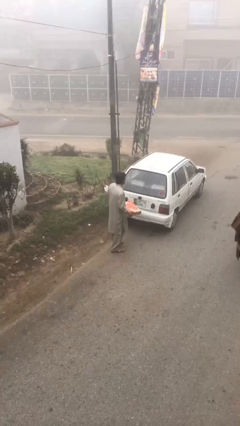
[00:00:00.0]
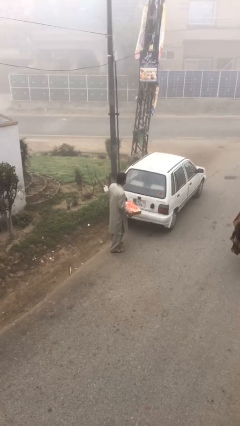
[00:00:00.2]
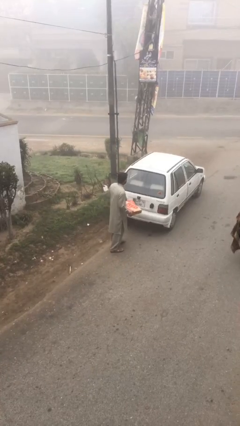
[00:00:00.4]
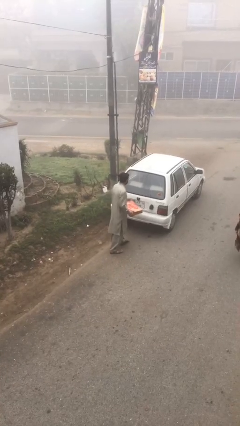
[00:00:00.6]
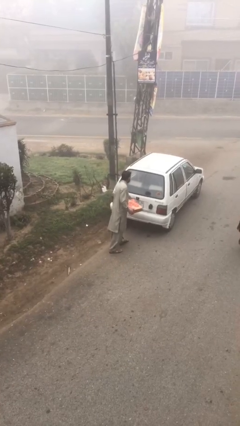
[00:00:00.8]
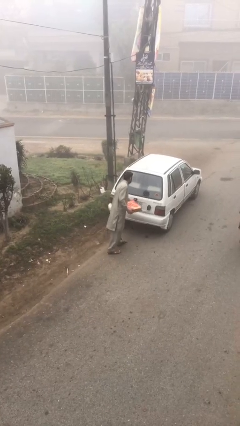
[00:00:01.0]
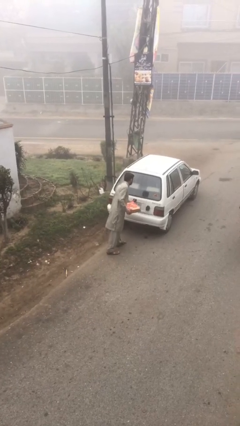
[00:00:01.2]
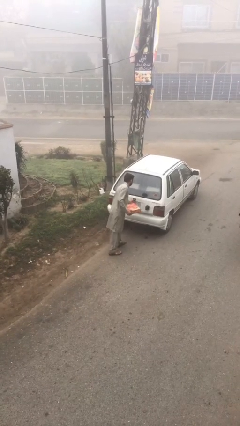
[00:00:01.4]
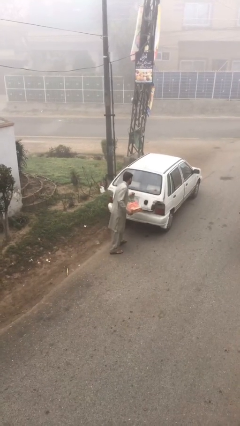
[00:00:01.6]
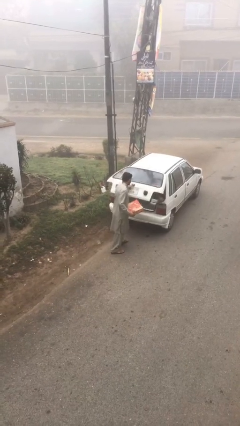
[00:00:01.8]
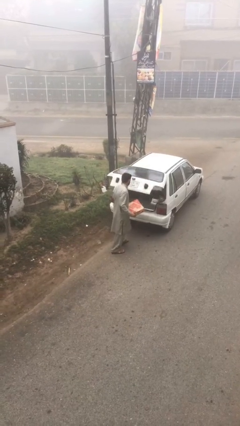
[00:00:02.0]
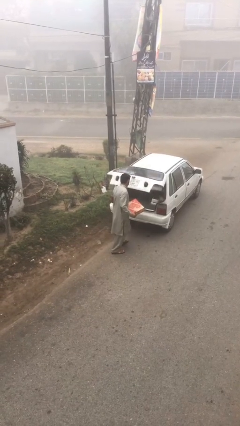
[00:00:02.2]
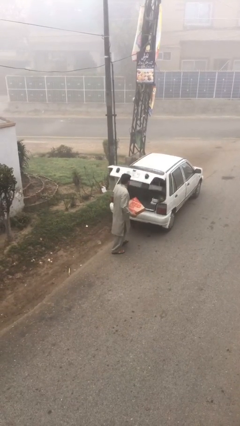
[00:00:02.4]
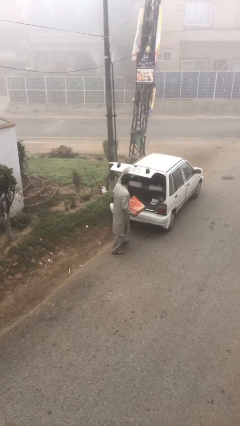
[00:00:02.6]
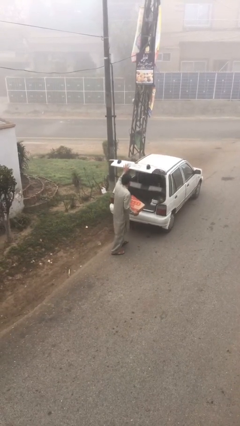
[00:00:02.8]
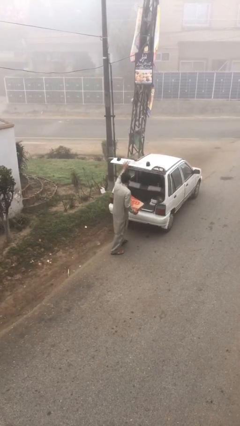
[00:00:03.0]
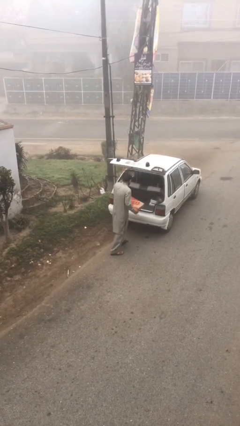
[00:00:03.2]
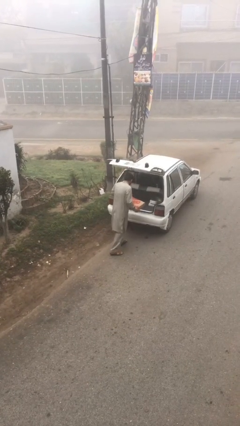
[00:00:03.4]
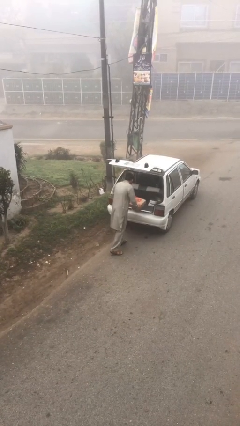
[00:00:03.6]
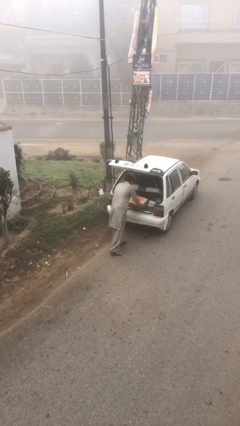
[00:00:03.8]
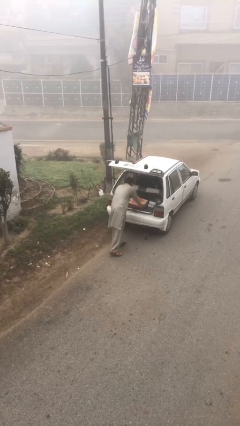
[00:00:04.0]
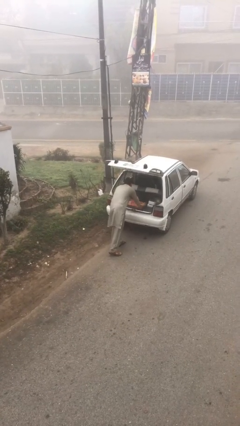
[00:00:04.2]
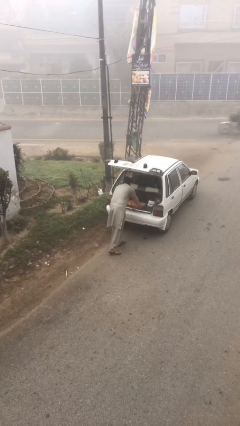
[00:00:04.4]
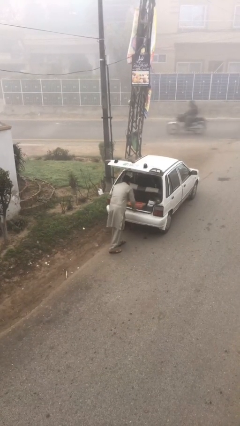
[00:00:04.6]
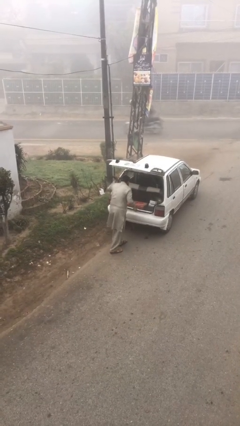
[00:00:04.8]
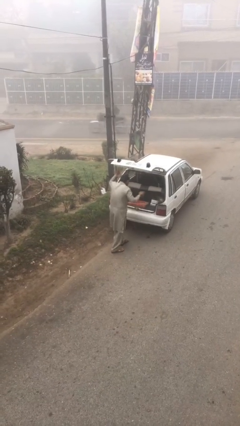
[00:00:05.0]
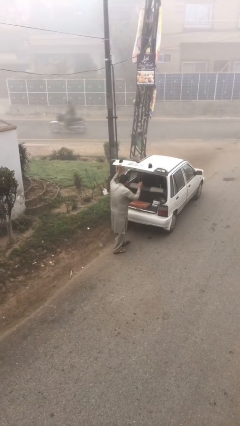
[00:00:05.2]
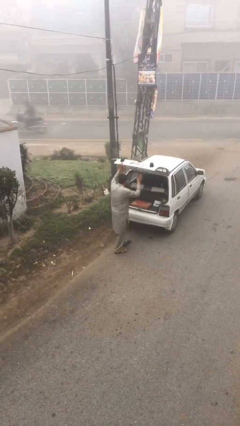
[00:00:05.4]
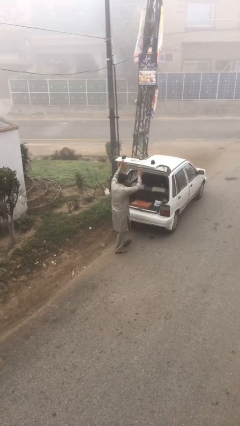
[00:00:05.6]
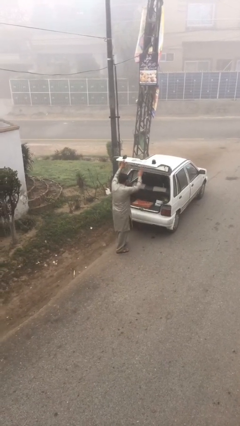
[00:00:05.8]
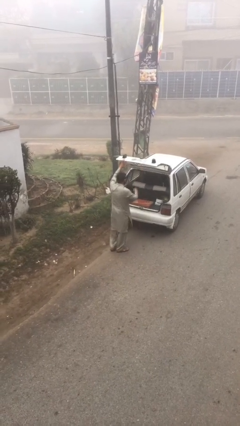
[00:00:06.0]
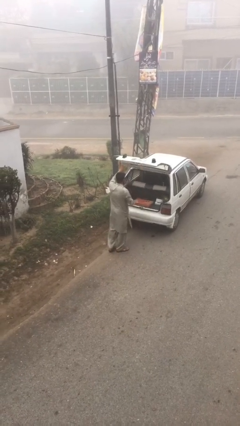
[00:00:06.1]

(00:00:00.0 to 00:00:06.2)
person loads car

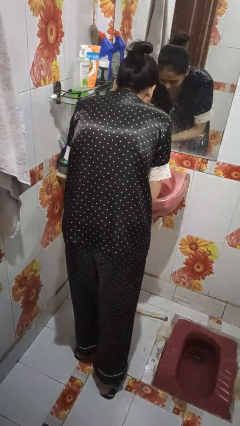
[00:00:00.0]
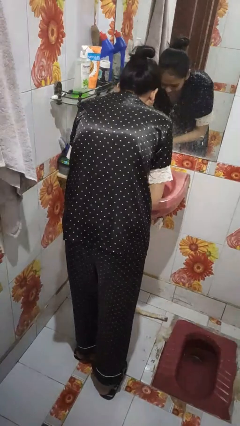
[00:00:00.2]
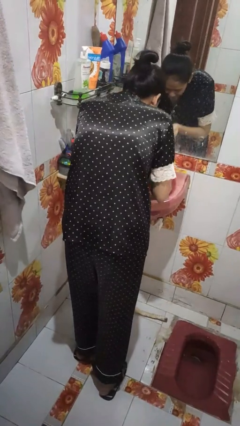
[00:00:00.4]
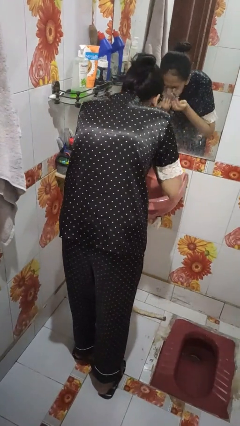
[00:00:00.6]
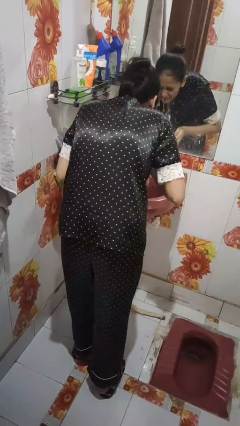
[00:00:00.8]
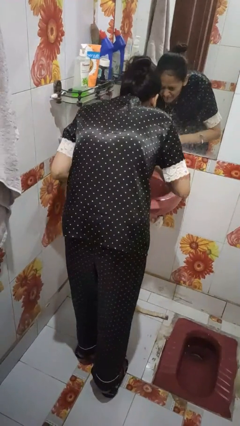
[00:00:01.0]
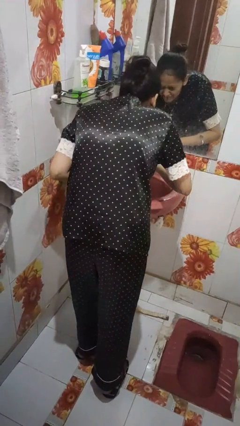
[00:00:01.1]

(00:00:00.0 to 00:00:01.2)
person washes face

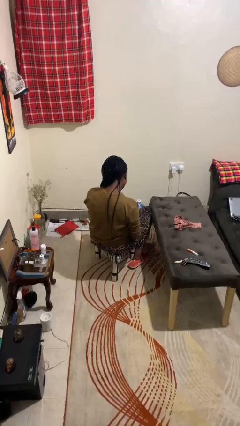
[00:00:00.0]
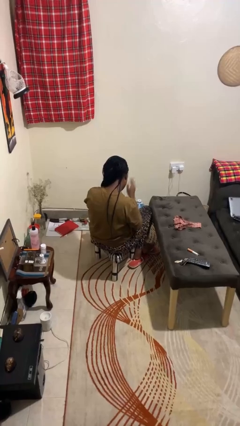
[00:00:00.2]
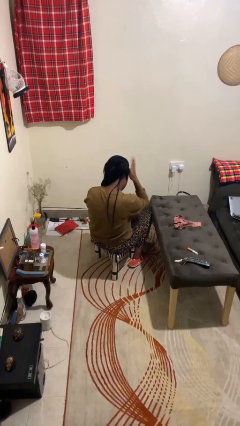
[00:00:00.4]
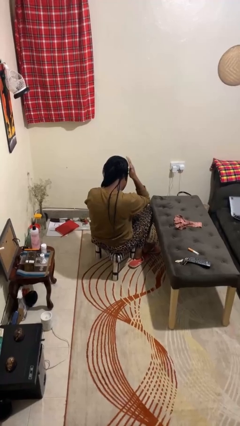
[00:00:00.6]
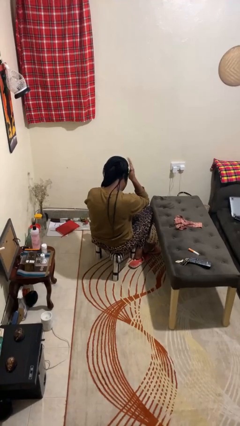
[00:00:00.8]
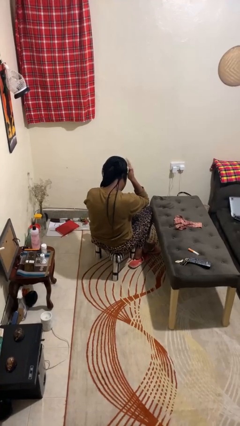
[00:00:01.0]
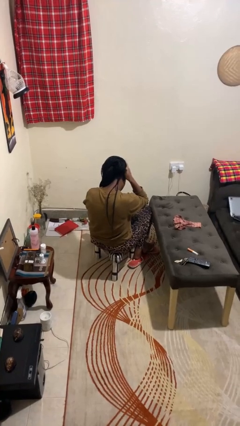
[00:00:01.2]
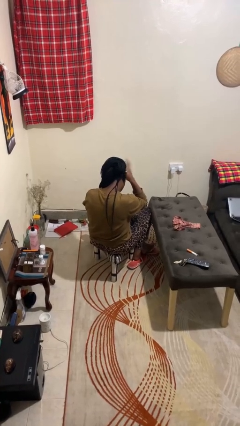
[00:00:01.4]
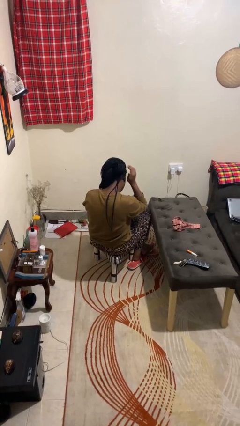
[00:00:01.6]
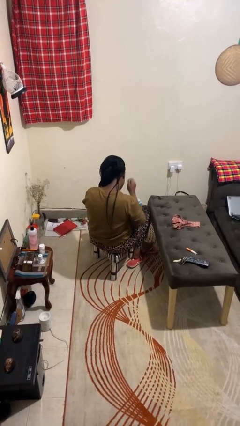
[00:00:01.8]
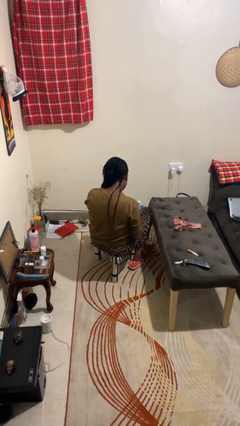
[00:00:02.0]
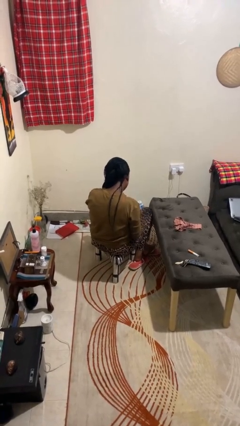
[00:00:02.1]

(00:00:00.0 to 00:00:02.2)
person pats head

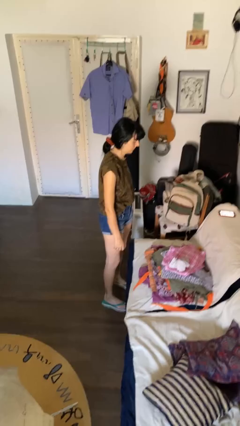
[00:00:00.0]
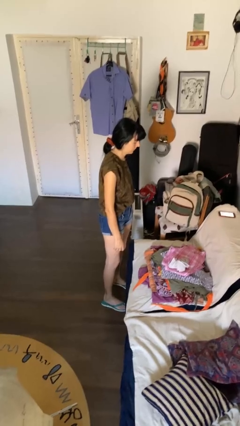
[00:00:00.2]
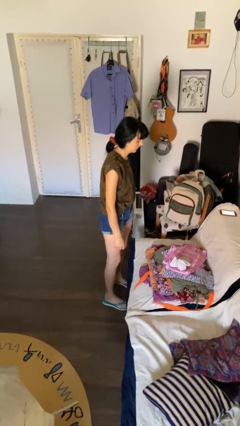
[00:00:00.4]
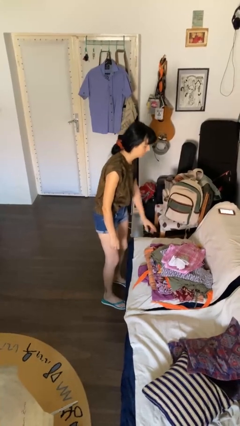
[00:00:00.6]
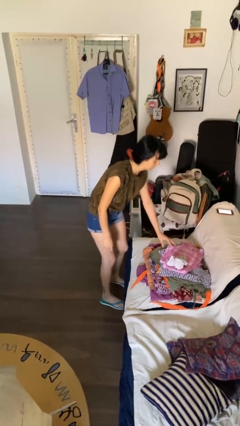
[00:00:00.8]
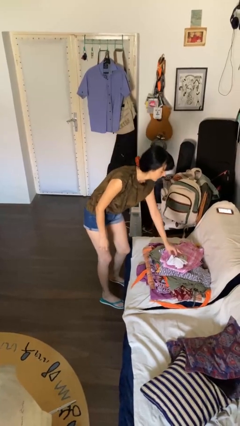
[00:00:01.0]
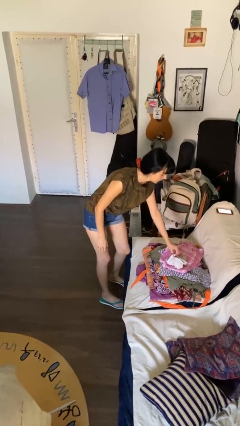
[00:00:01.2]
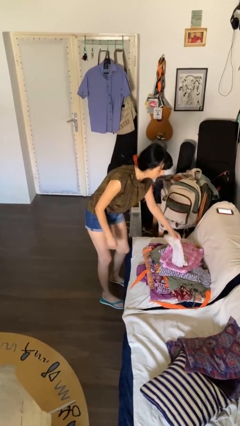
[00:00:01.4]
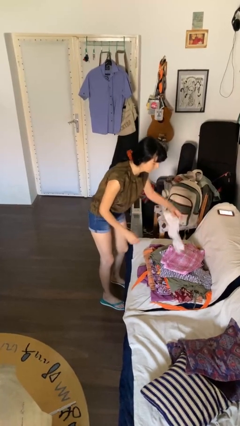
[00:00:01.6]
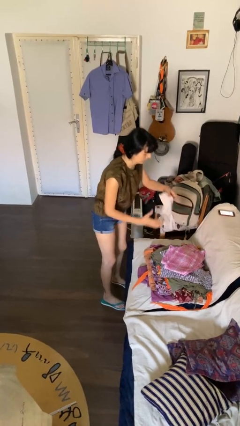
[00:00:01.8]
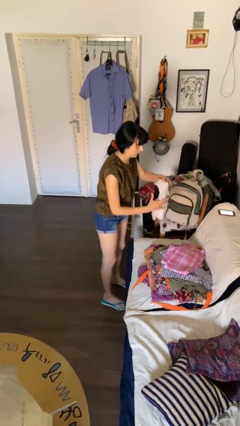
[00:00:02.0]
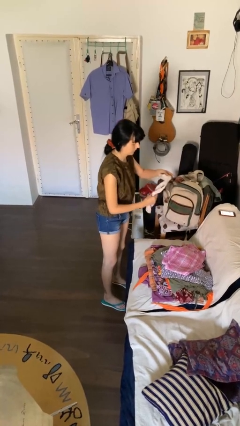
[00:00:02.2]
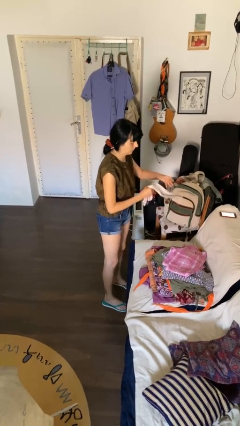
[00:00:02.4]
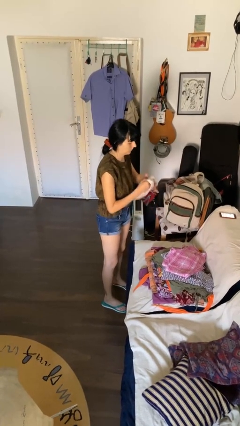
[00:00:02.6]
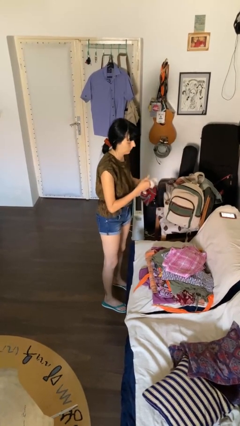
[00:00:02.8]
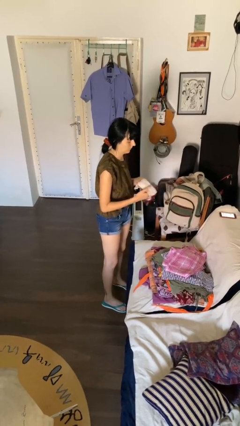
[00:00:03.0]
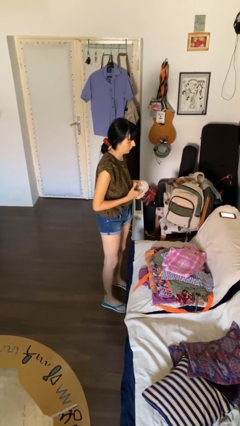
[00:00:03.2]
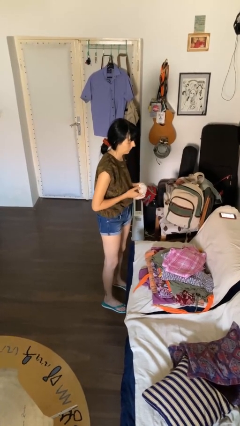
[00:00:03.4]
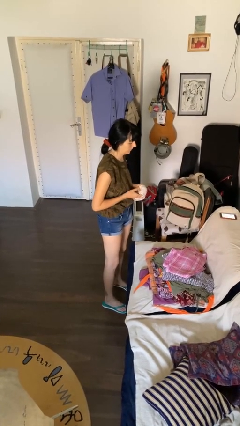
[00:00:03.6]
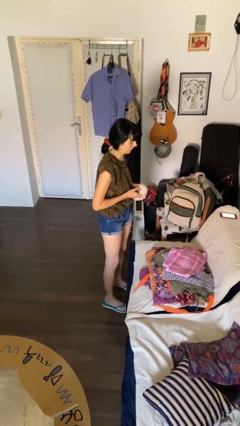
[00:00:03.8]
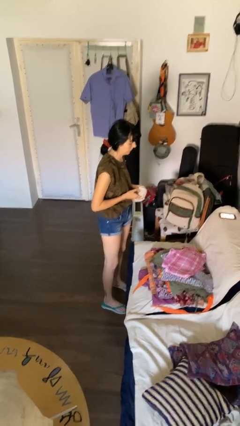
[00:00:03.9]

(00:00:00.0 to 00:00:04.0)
person folds socks

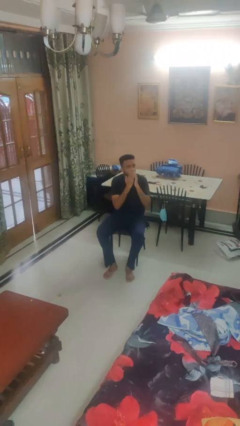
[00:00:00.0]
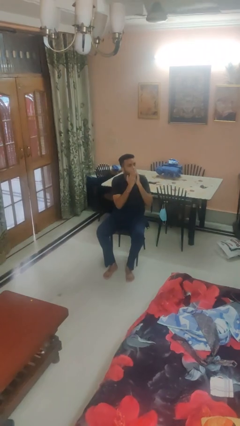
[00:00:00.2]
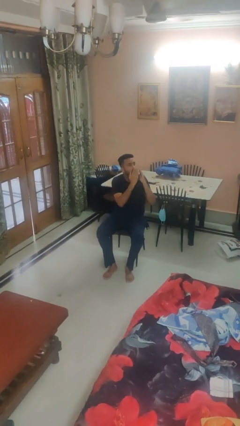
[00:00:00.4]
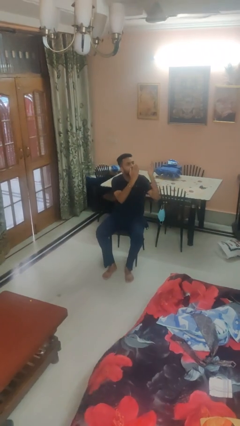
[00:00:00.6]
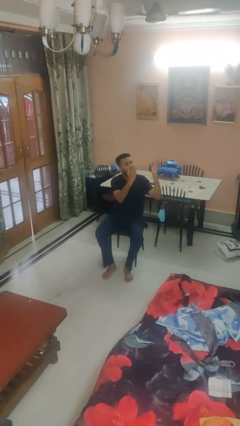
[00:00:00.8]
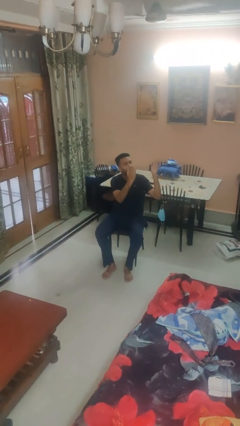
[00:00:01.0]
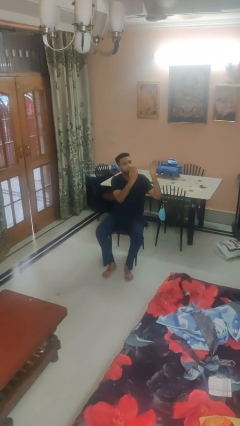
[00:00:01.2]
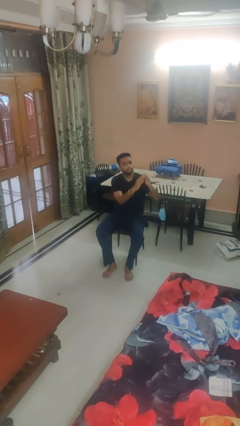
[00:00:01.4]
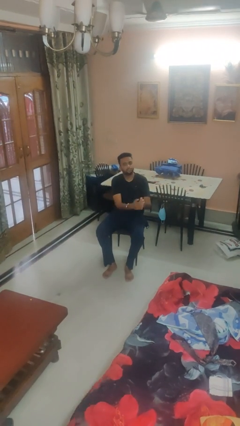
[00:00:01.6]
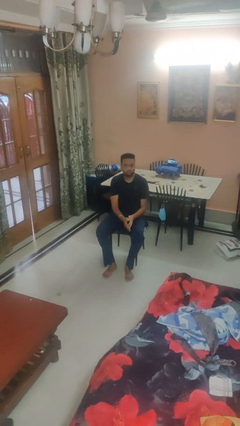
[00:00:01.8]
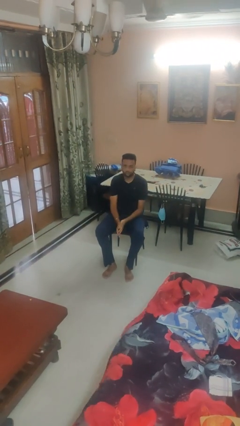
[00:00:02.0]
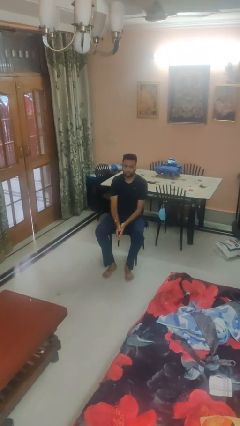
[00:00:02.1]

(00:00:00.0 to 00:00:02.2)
person gestures blow kiss

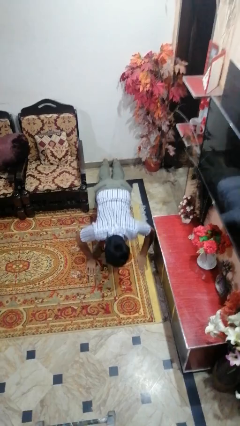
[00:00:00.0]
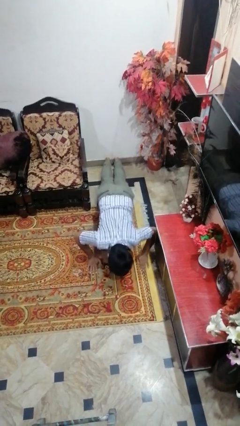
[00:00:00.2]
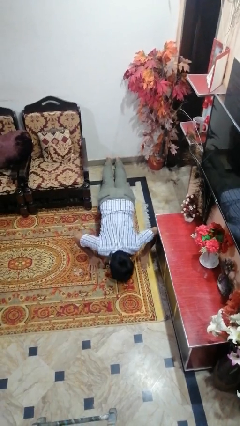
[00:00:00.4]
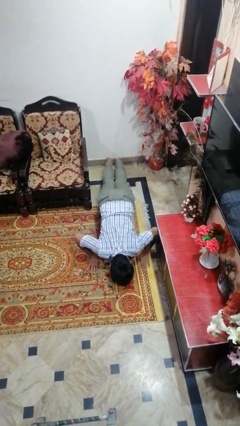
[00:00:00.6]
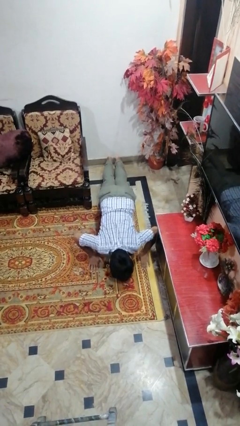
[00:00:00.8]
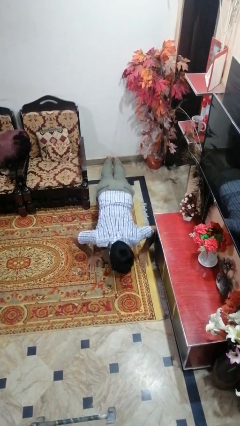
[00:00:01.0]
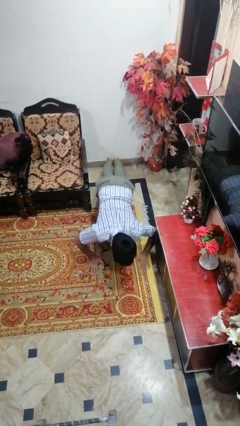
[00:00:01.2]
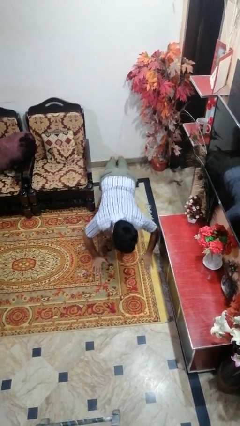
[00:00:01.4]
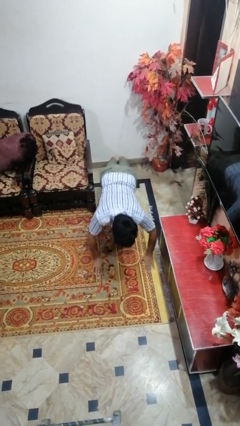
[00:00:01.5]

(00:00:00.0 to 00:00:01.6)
person exercises with pushup
